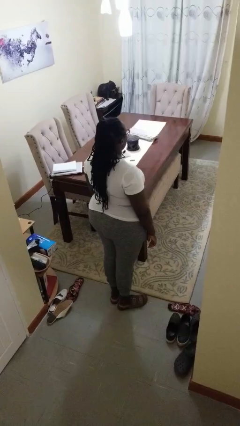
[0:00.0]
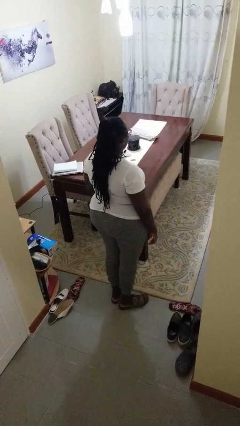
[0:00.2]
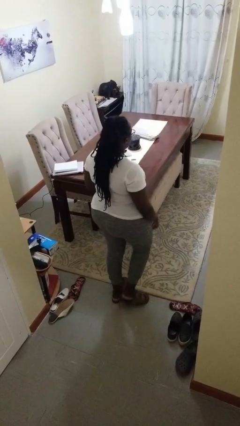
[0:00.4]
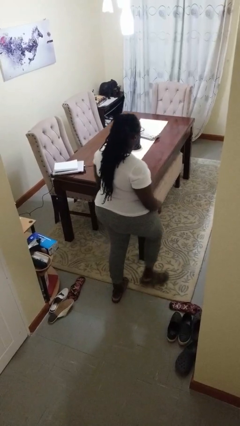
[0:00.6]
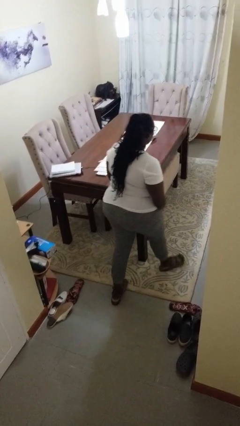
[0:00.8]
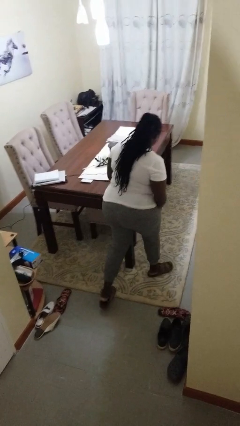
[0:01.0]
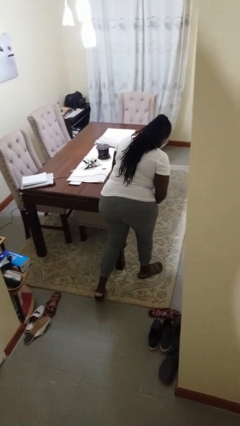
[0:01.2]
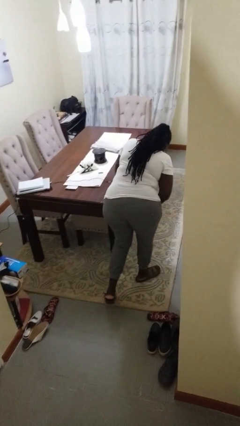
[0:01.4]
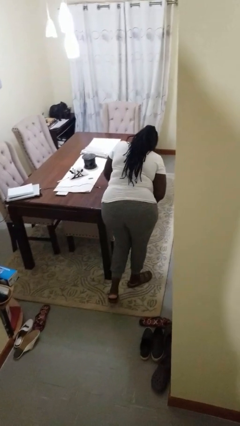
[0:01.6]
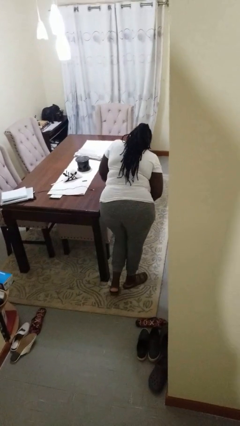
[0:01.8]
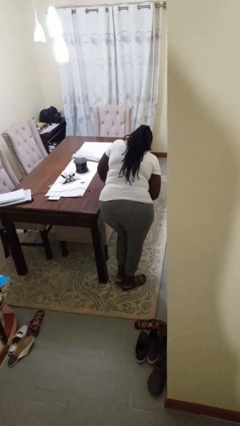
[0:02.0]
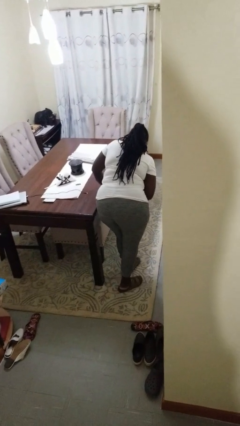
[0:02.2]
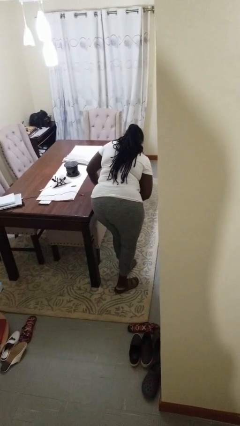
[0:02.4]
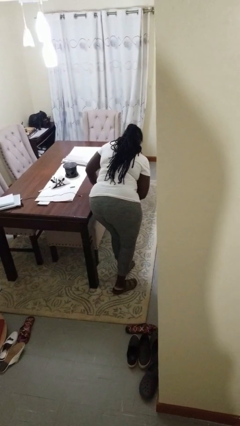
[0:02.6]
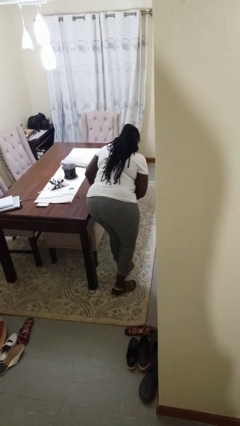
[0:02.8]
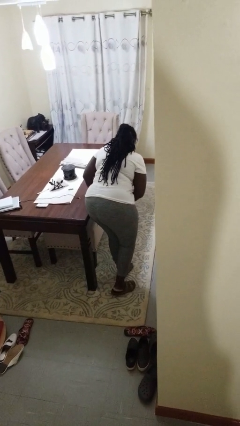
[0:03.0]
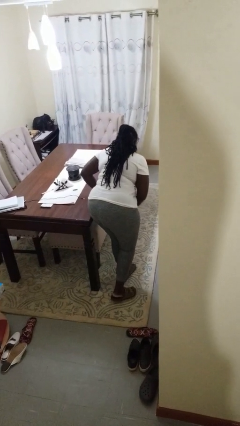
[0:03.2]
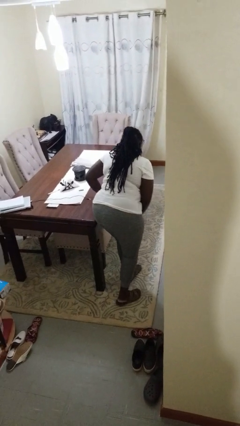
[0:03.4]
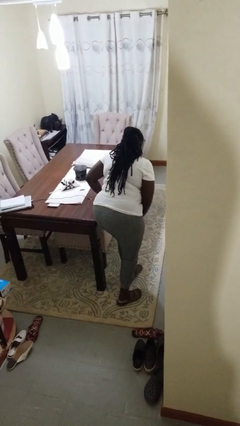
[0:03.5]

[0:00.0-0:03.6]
person bumps into table

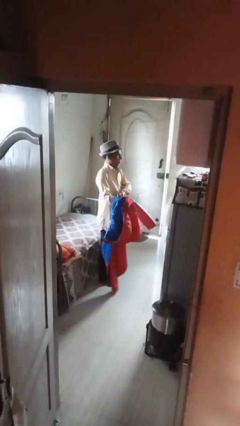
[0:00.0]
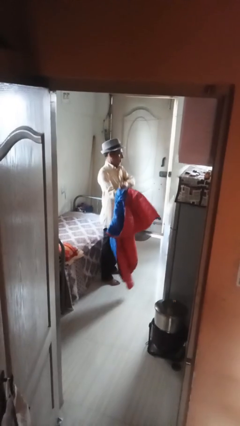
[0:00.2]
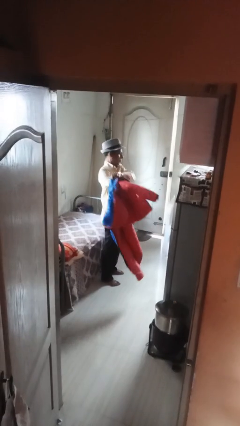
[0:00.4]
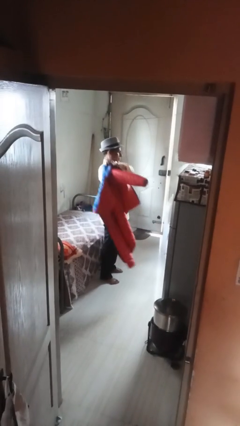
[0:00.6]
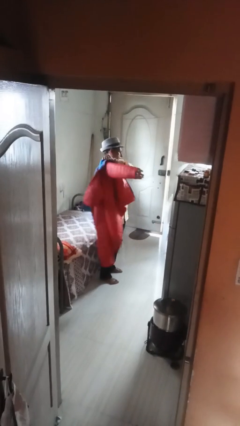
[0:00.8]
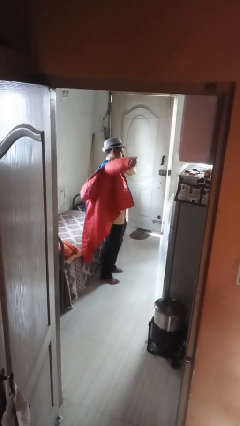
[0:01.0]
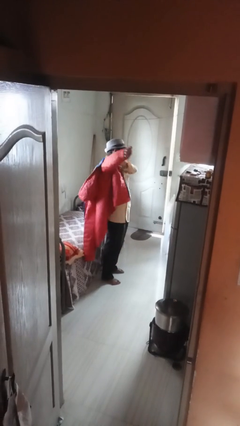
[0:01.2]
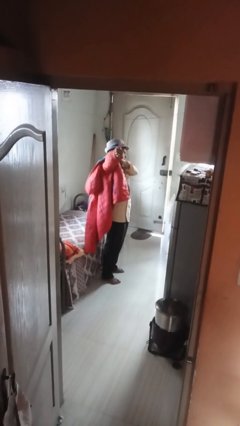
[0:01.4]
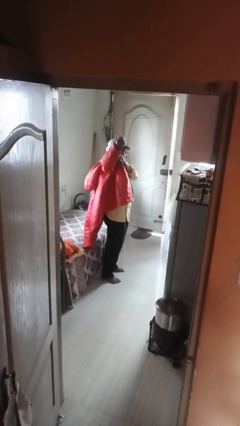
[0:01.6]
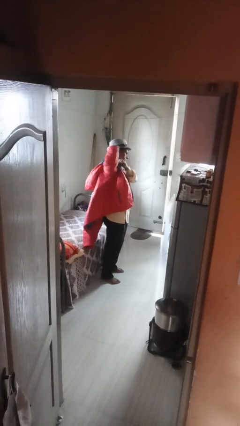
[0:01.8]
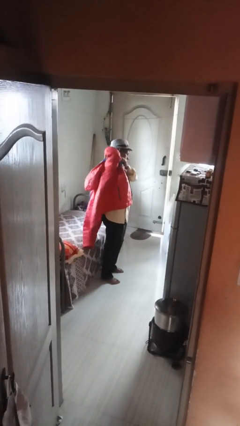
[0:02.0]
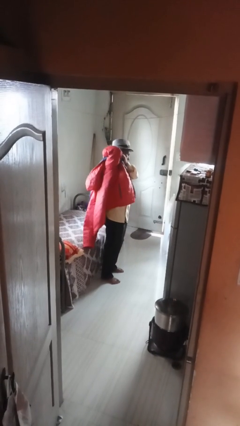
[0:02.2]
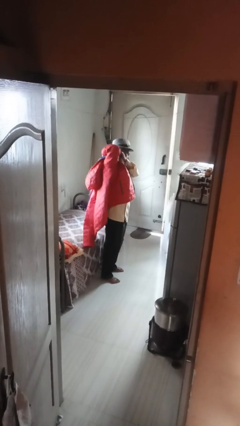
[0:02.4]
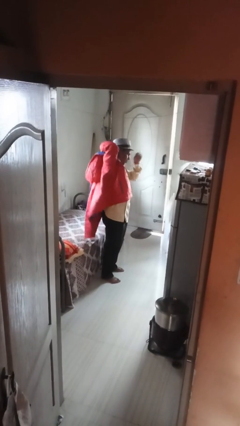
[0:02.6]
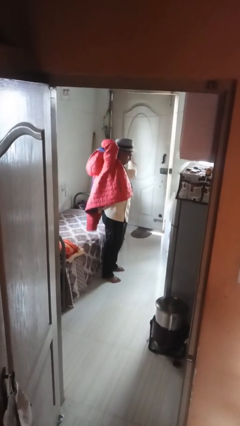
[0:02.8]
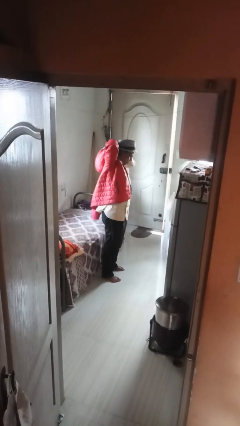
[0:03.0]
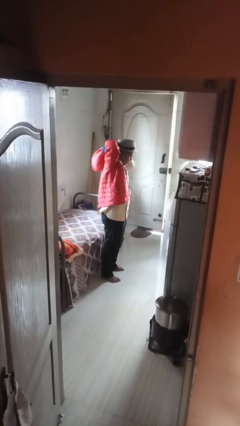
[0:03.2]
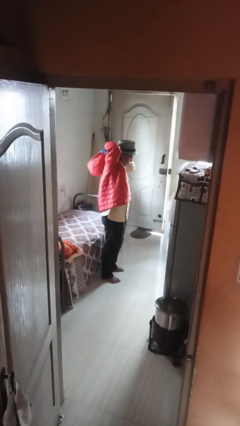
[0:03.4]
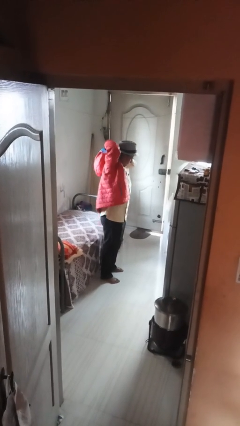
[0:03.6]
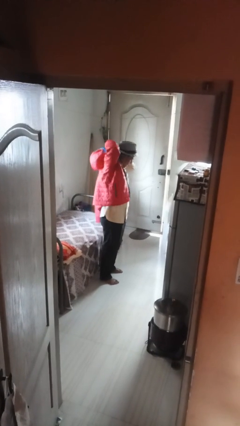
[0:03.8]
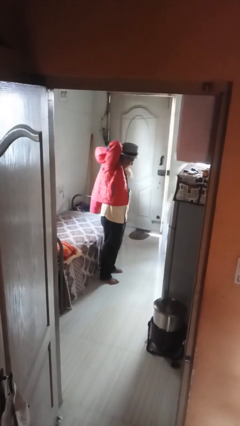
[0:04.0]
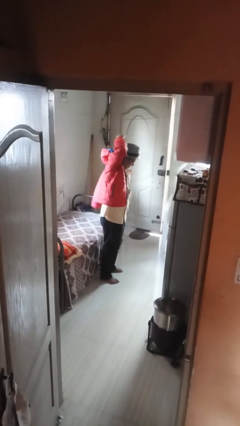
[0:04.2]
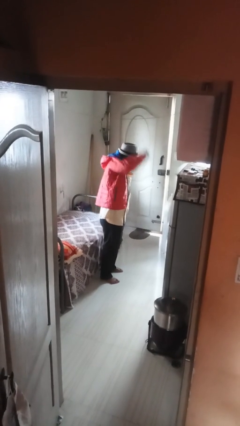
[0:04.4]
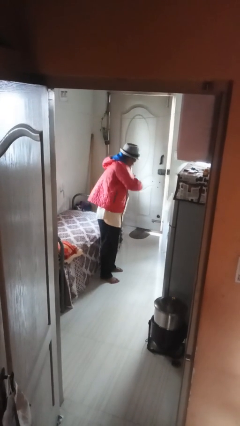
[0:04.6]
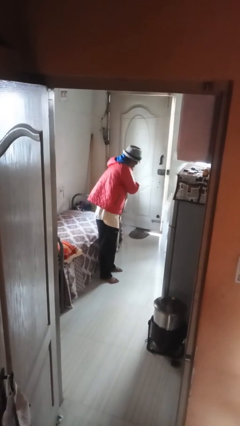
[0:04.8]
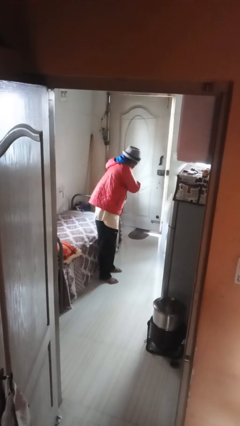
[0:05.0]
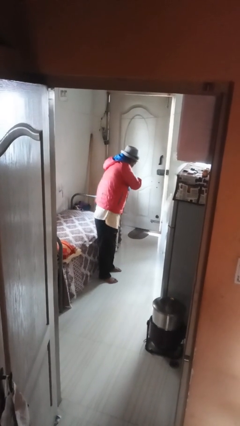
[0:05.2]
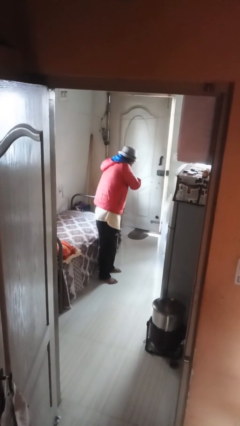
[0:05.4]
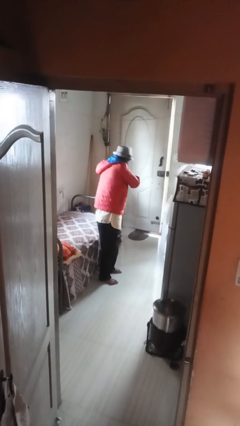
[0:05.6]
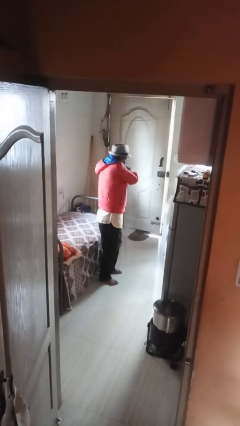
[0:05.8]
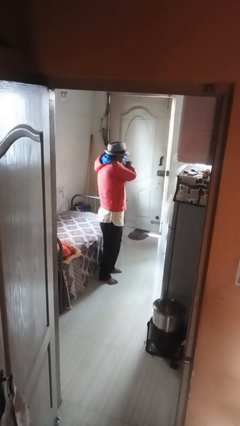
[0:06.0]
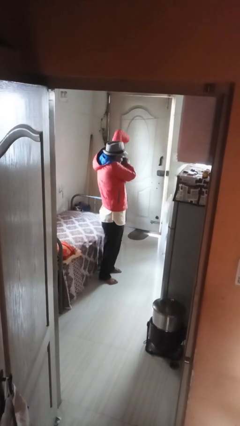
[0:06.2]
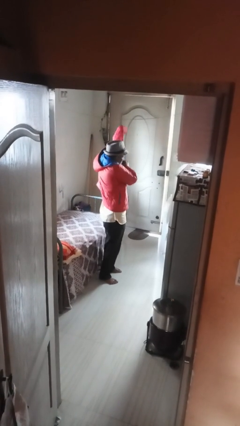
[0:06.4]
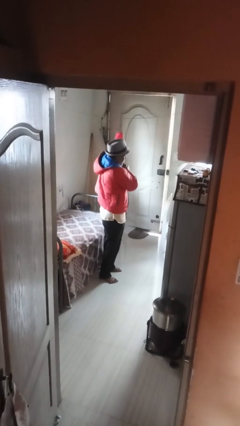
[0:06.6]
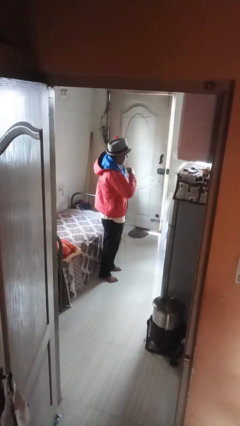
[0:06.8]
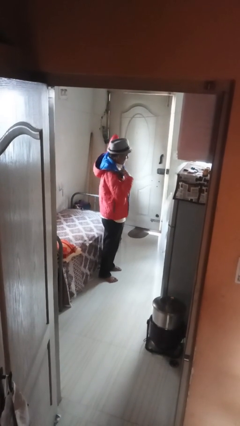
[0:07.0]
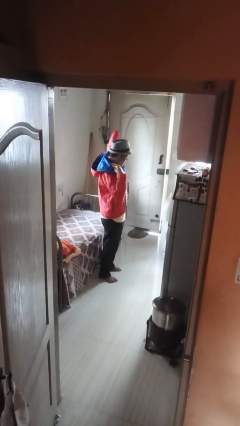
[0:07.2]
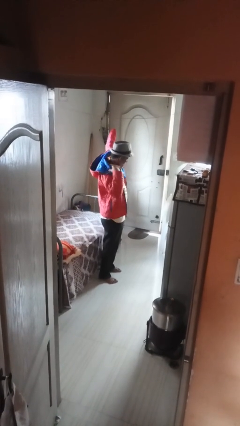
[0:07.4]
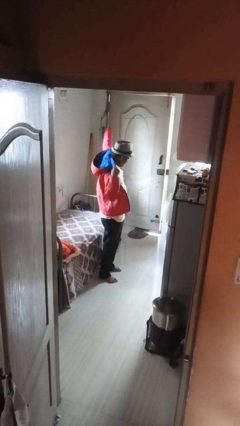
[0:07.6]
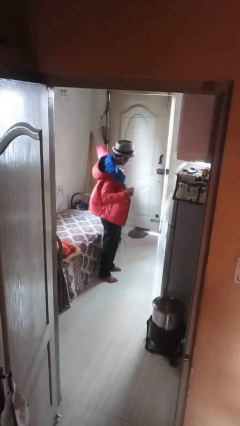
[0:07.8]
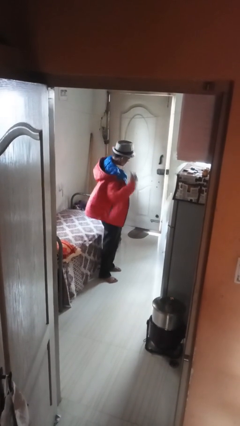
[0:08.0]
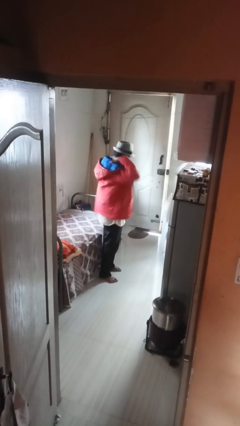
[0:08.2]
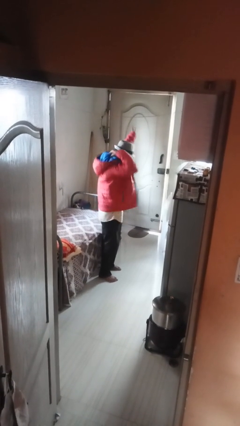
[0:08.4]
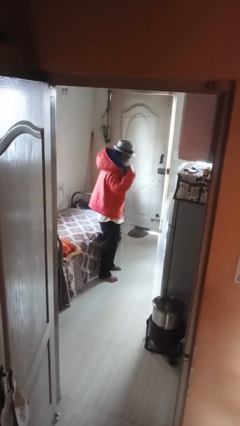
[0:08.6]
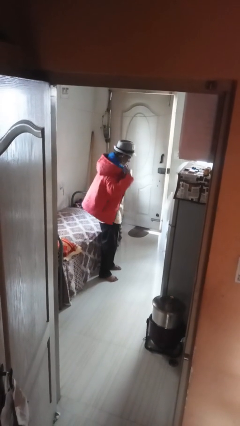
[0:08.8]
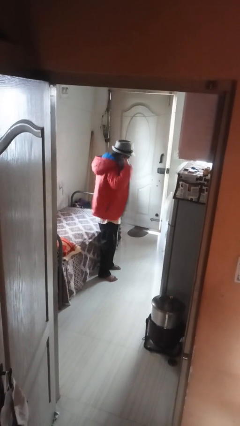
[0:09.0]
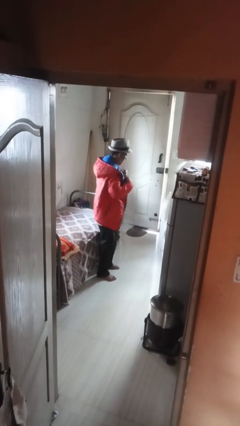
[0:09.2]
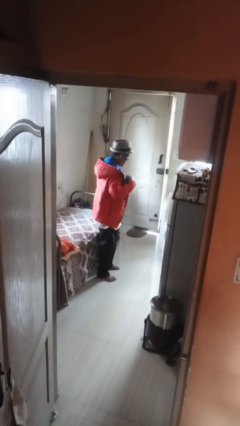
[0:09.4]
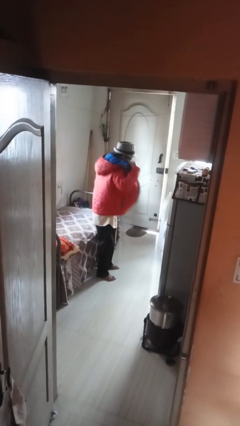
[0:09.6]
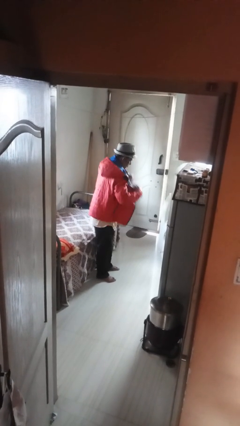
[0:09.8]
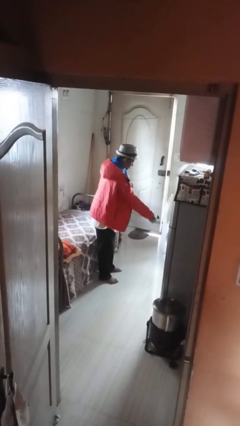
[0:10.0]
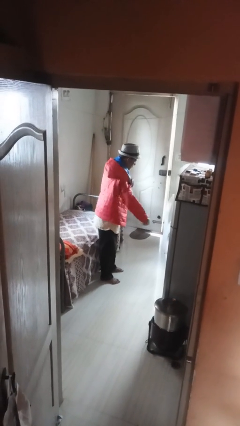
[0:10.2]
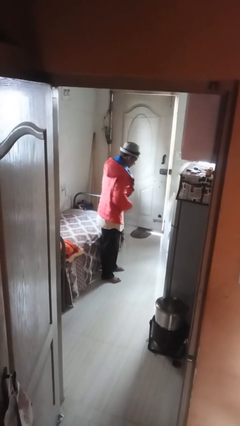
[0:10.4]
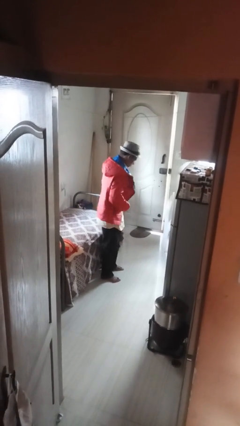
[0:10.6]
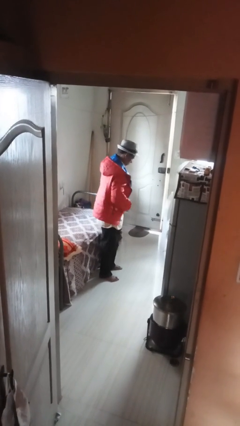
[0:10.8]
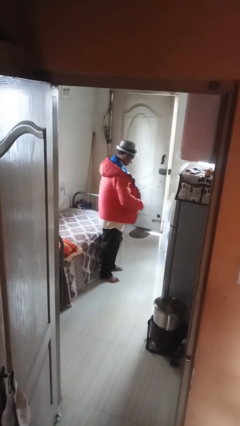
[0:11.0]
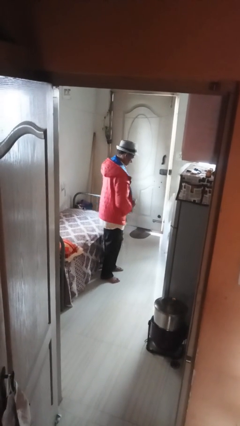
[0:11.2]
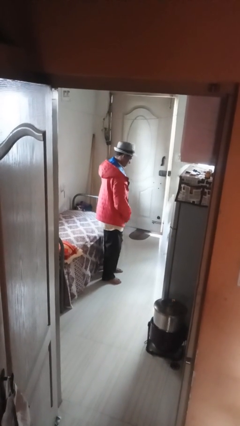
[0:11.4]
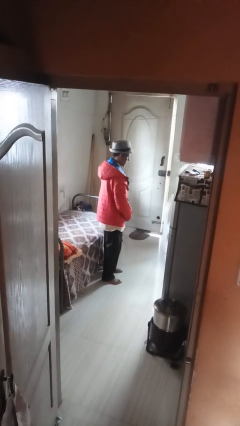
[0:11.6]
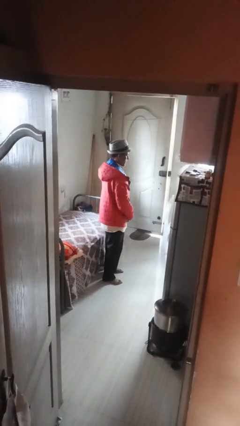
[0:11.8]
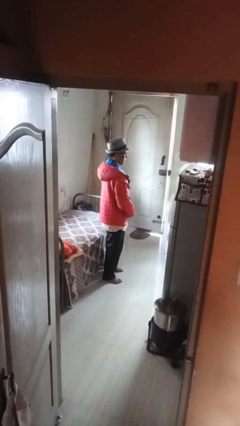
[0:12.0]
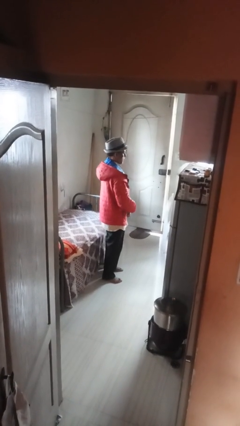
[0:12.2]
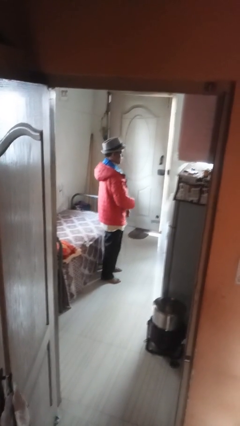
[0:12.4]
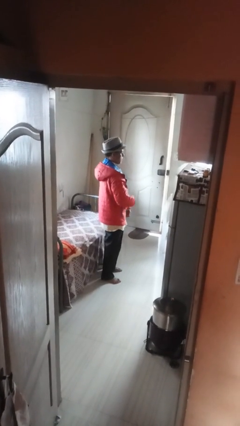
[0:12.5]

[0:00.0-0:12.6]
person puts on jacket

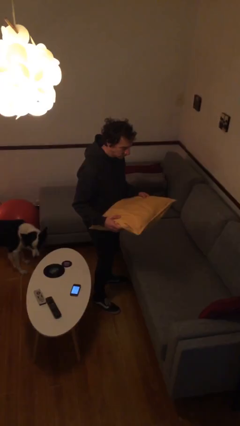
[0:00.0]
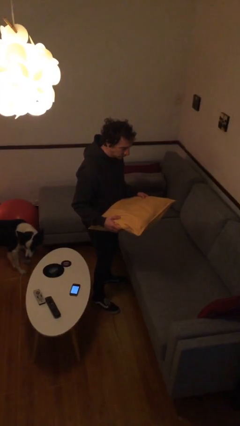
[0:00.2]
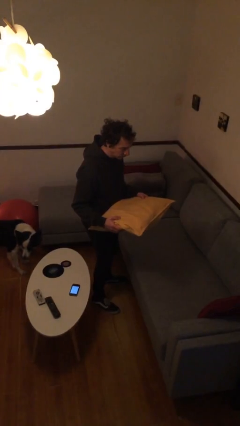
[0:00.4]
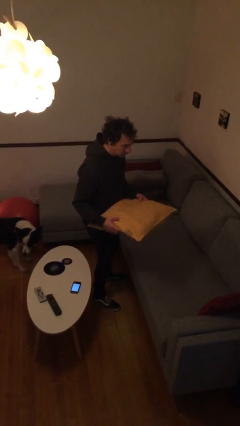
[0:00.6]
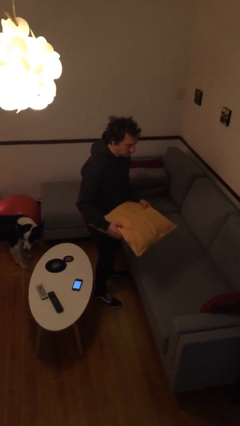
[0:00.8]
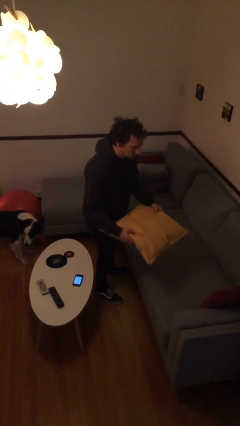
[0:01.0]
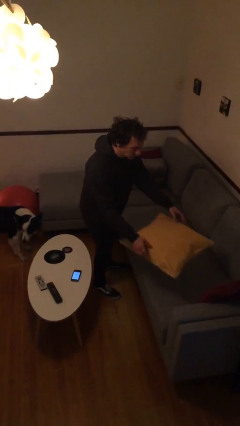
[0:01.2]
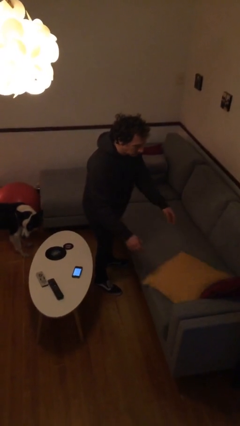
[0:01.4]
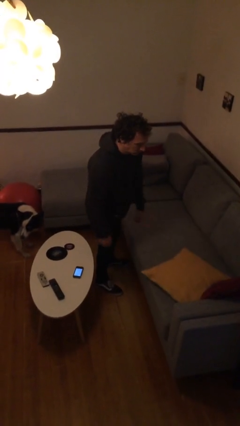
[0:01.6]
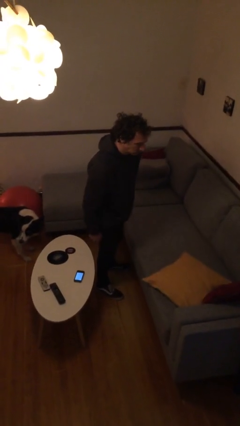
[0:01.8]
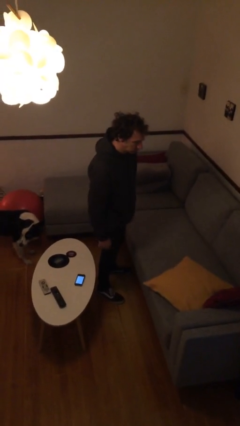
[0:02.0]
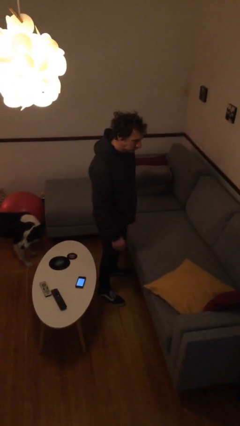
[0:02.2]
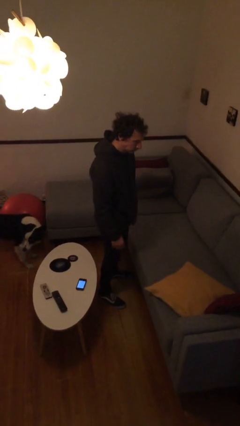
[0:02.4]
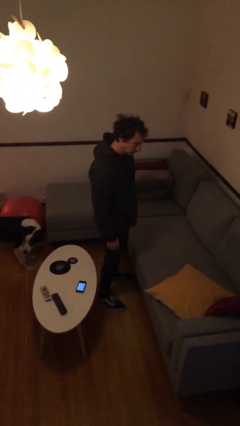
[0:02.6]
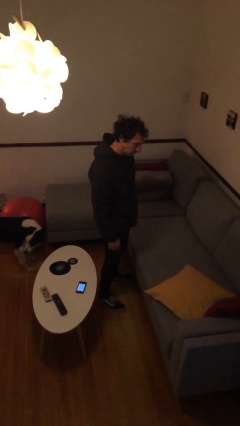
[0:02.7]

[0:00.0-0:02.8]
person puts down object on couch
